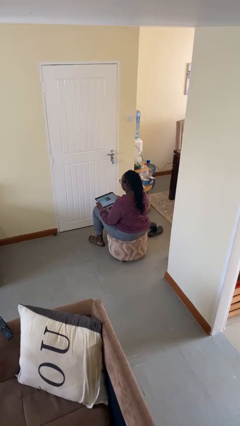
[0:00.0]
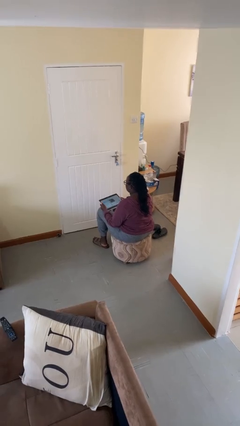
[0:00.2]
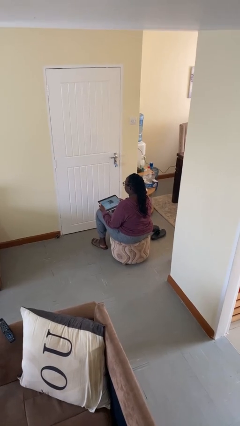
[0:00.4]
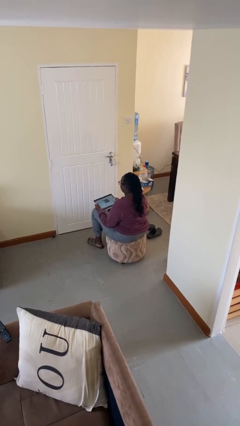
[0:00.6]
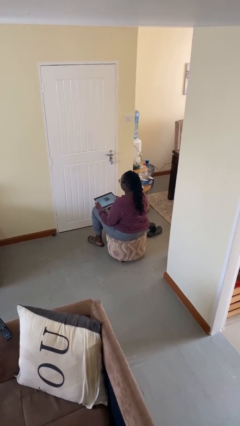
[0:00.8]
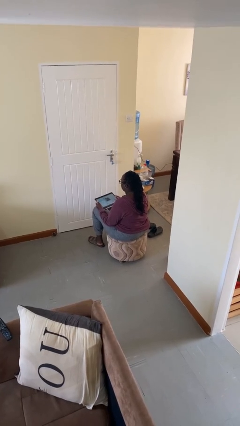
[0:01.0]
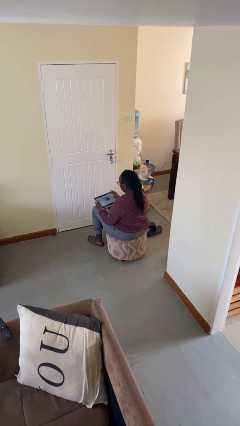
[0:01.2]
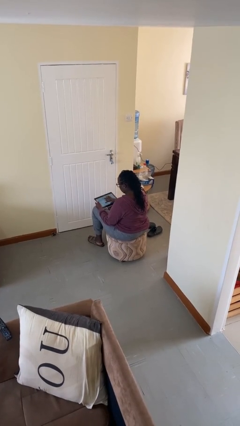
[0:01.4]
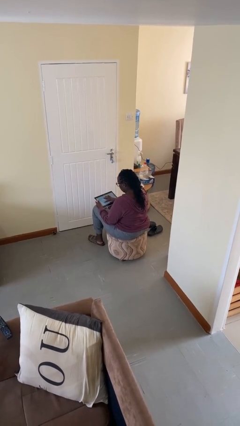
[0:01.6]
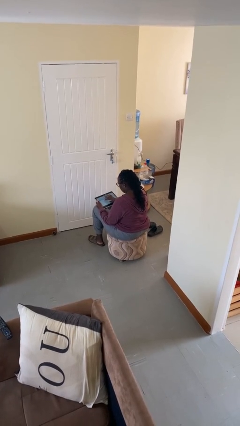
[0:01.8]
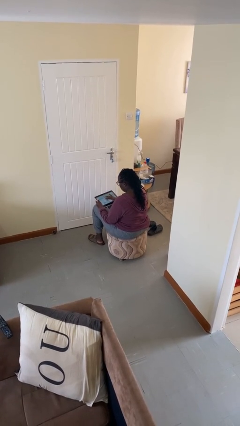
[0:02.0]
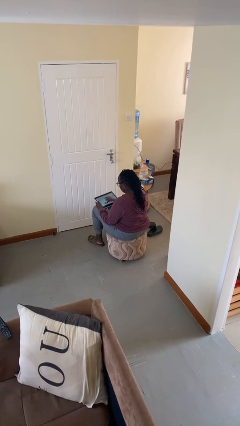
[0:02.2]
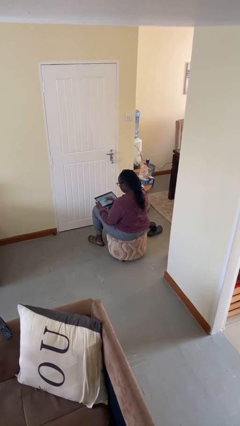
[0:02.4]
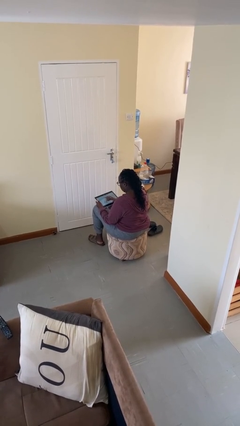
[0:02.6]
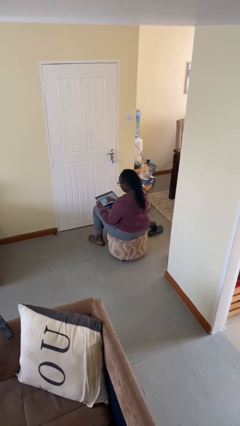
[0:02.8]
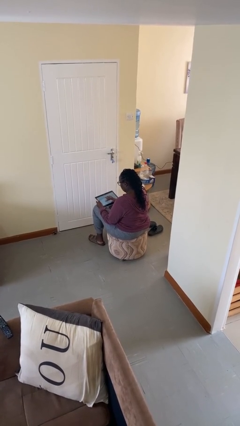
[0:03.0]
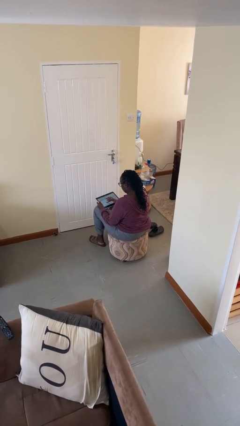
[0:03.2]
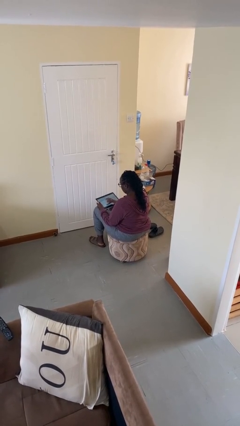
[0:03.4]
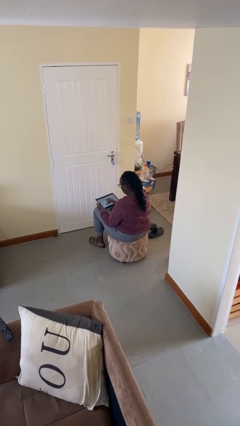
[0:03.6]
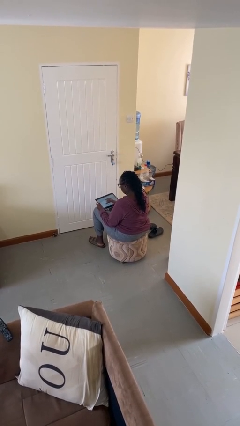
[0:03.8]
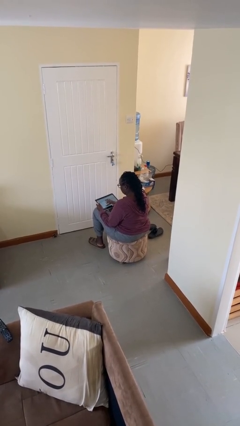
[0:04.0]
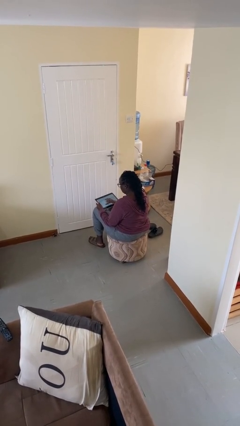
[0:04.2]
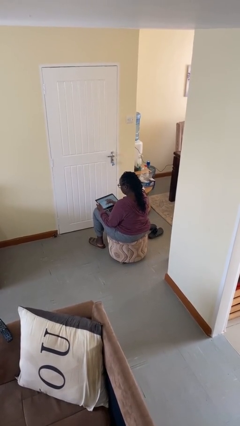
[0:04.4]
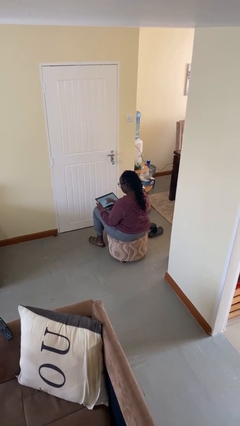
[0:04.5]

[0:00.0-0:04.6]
person interacts with tablet

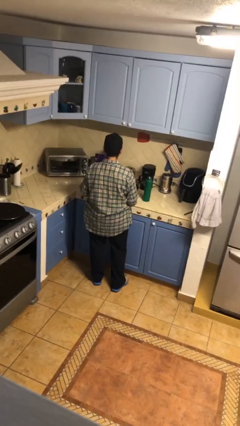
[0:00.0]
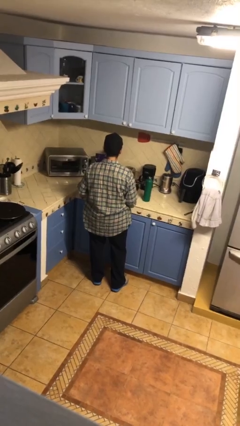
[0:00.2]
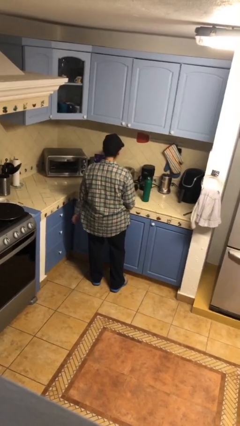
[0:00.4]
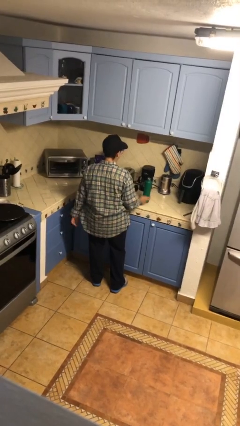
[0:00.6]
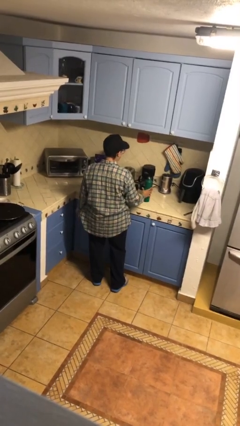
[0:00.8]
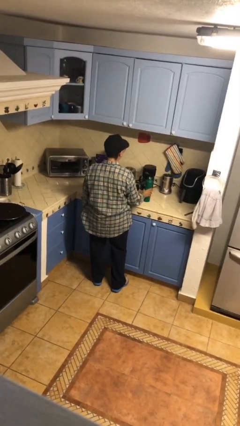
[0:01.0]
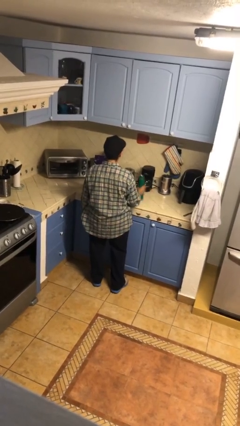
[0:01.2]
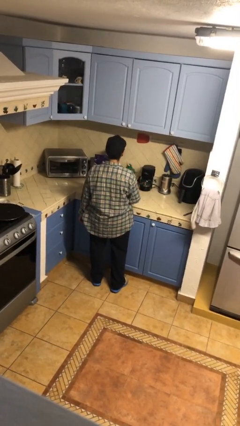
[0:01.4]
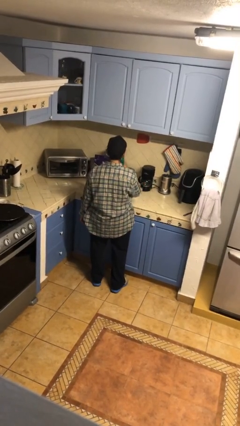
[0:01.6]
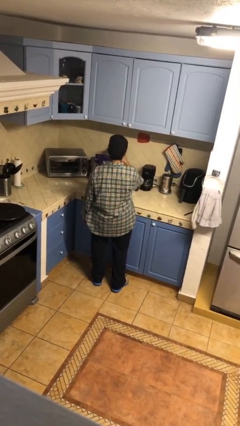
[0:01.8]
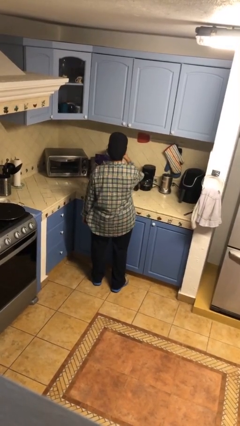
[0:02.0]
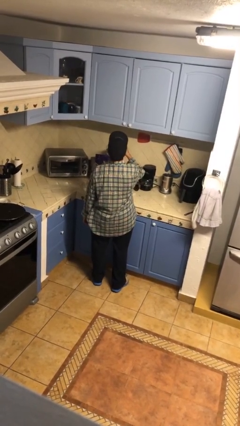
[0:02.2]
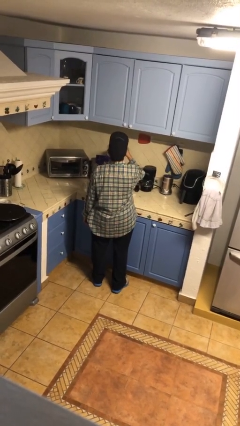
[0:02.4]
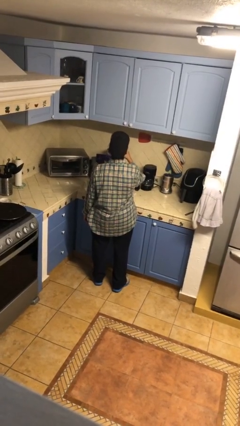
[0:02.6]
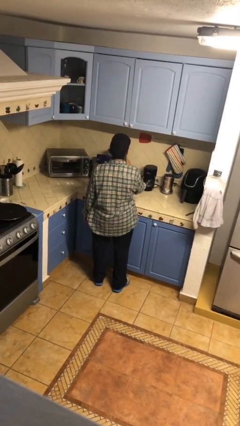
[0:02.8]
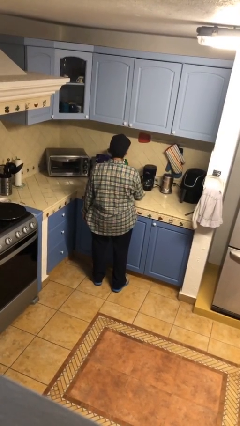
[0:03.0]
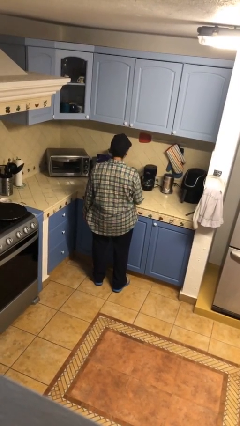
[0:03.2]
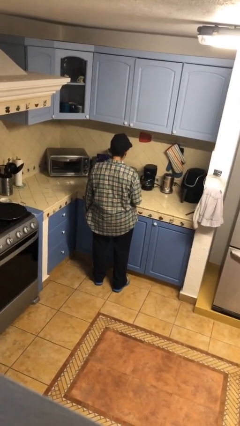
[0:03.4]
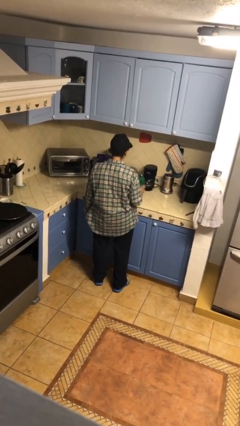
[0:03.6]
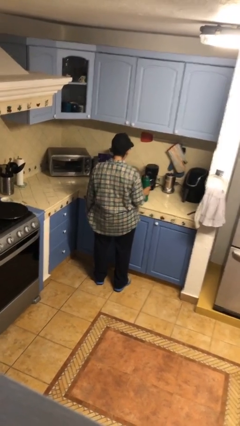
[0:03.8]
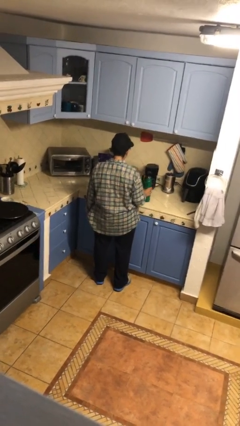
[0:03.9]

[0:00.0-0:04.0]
person drinks from bottle

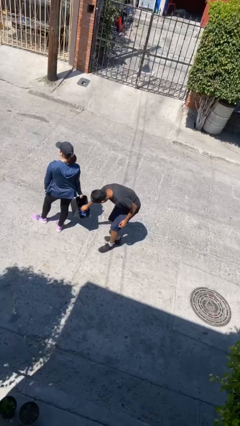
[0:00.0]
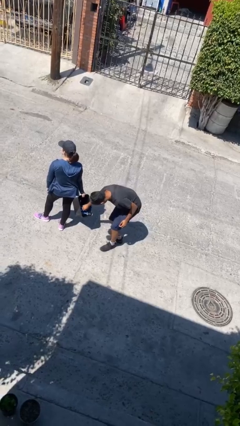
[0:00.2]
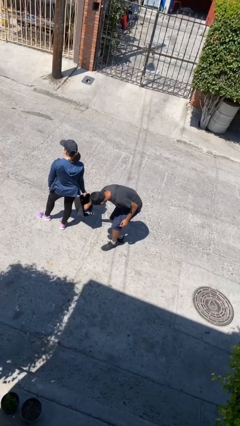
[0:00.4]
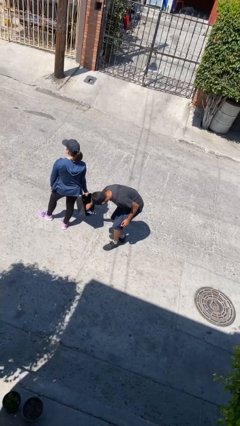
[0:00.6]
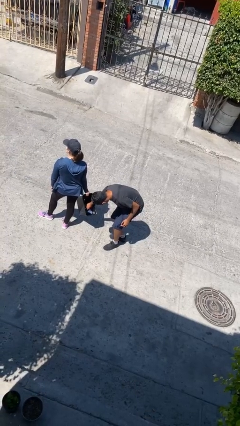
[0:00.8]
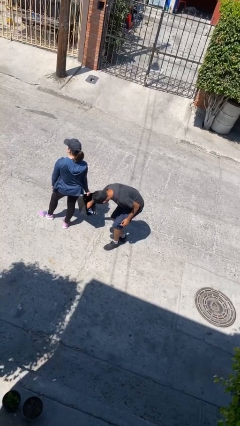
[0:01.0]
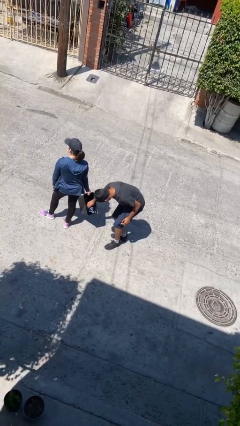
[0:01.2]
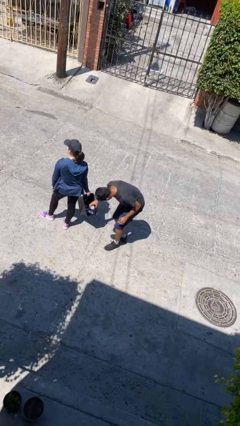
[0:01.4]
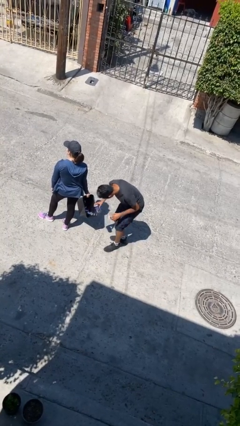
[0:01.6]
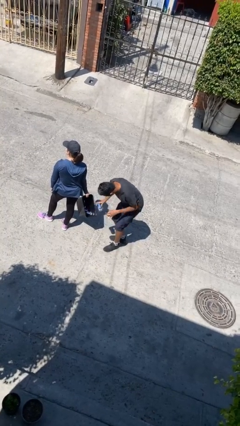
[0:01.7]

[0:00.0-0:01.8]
person steals object from person

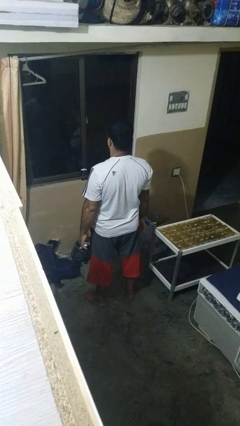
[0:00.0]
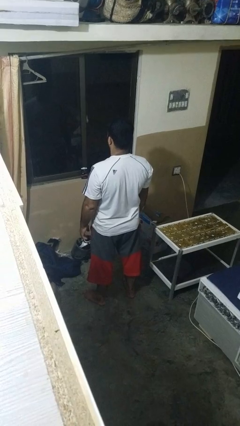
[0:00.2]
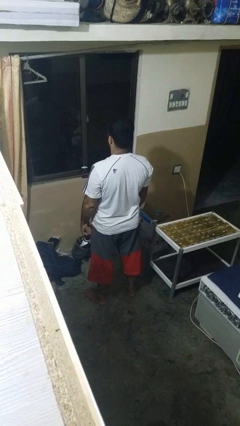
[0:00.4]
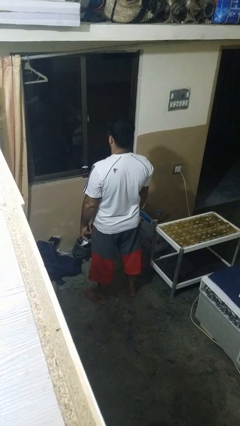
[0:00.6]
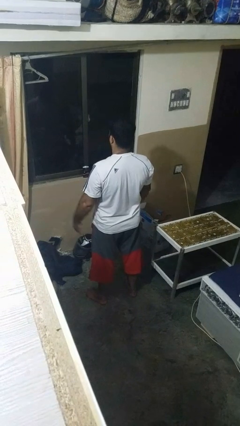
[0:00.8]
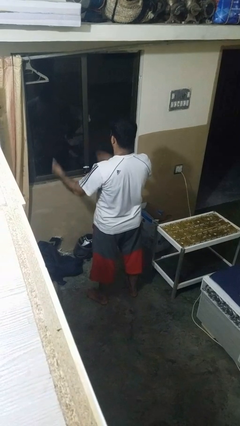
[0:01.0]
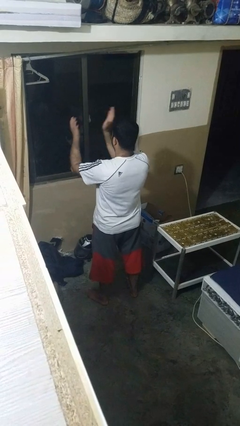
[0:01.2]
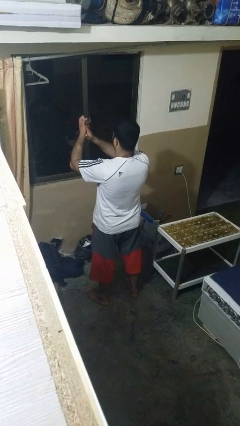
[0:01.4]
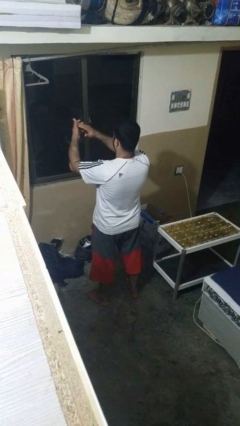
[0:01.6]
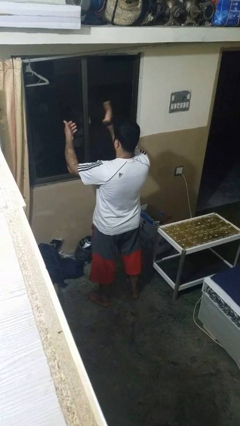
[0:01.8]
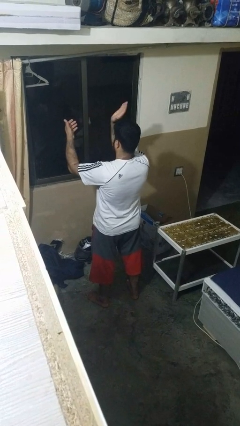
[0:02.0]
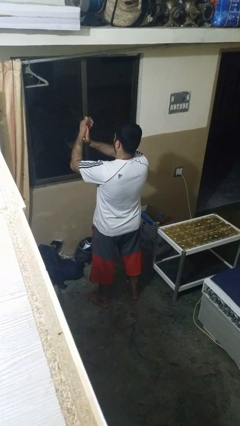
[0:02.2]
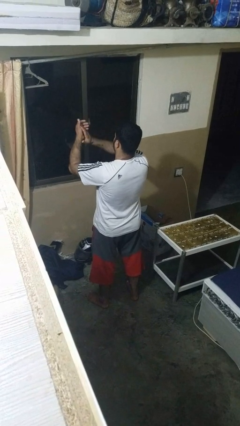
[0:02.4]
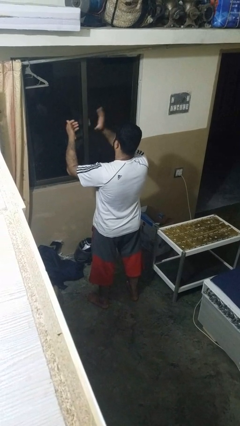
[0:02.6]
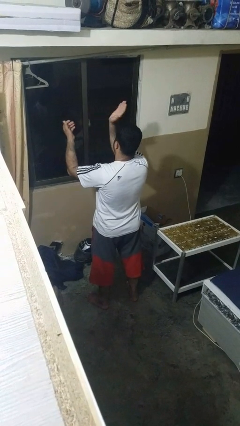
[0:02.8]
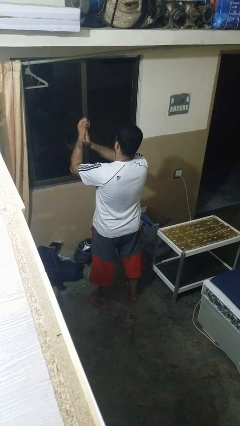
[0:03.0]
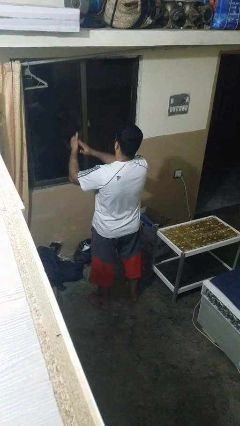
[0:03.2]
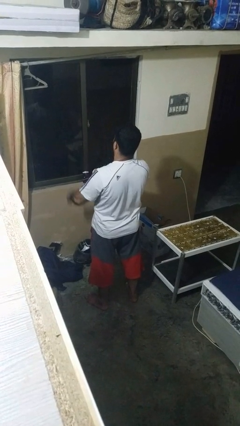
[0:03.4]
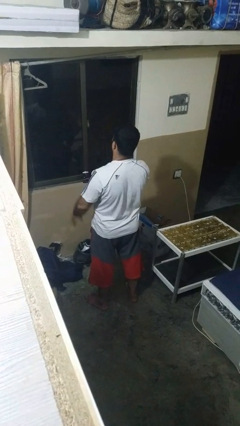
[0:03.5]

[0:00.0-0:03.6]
person claps hands

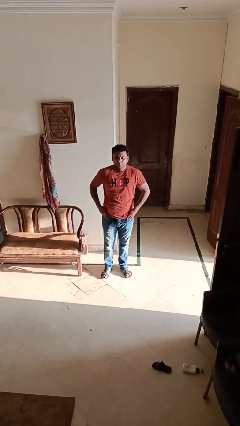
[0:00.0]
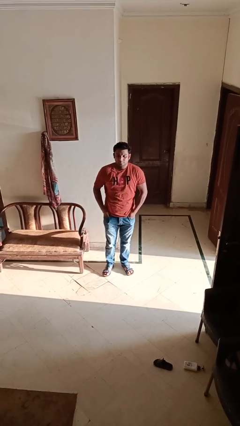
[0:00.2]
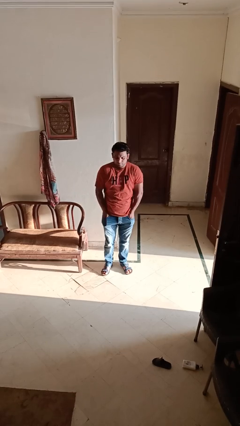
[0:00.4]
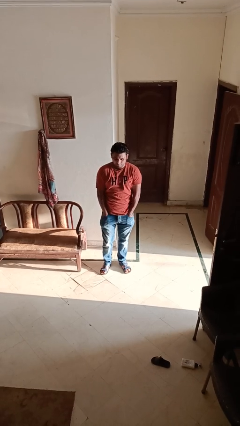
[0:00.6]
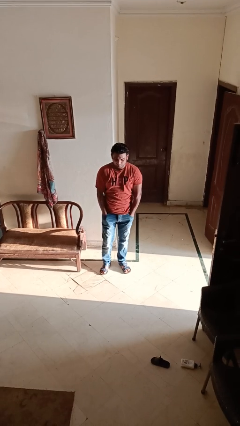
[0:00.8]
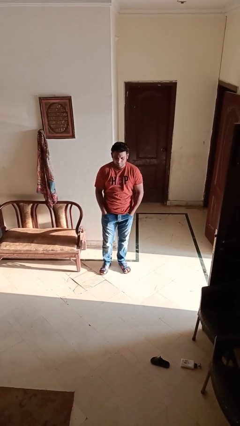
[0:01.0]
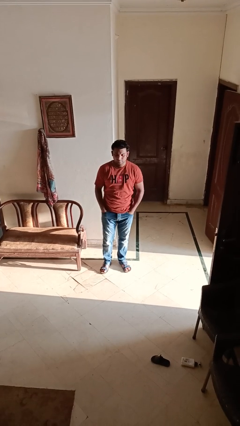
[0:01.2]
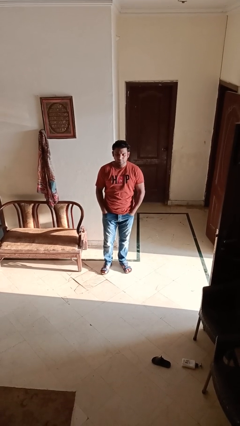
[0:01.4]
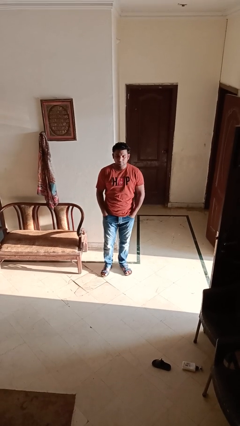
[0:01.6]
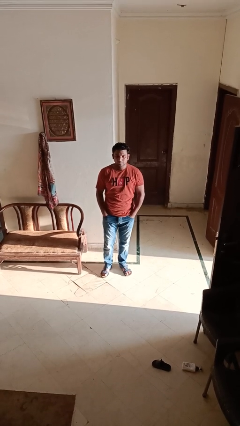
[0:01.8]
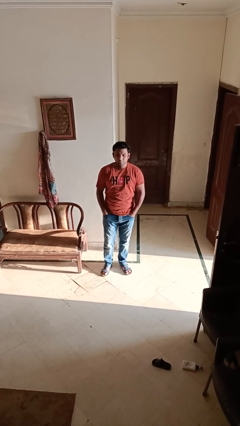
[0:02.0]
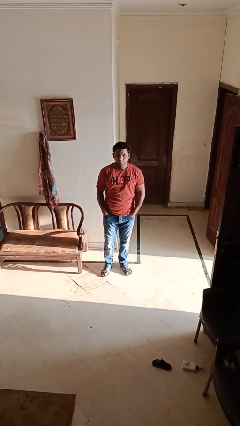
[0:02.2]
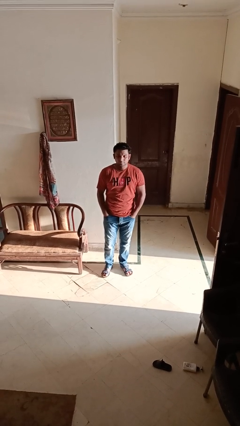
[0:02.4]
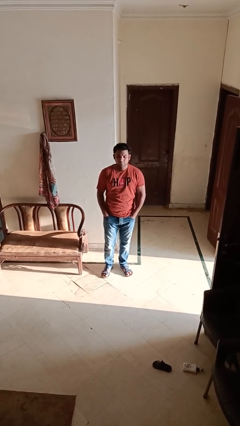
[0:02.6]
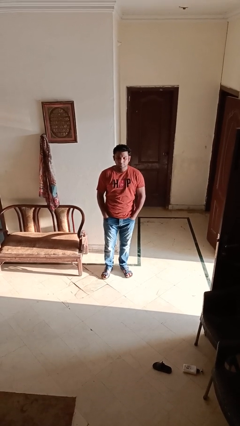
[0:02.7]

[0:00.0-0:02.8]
person puts hands in back pockets

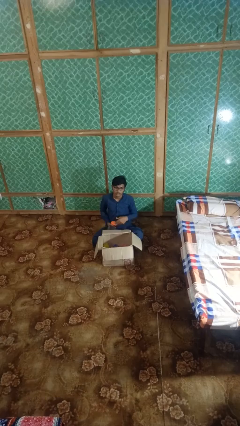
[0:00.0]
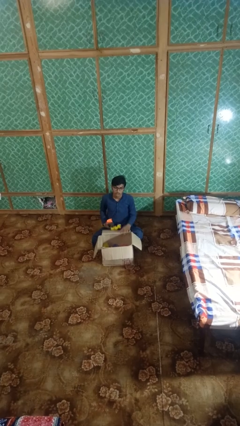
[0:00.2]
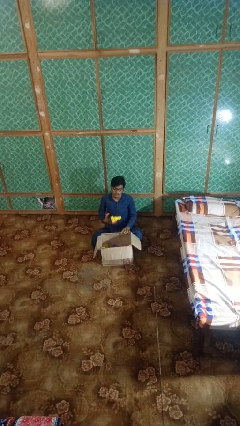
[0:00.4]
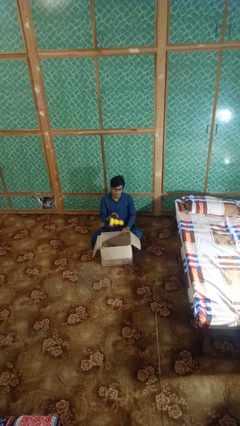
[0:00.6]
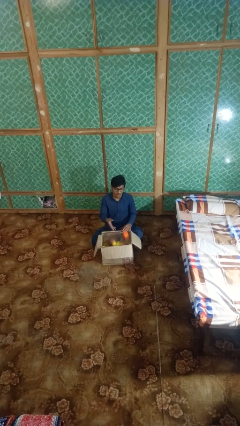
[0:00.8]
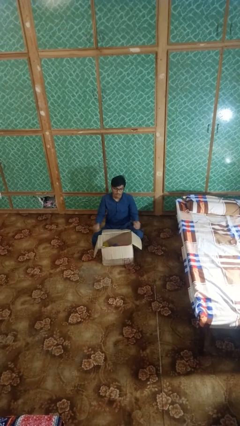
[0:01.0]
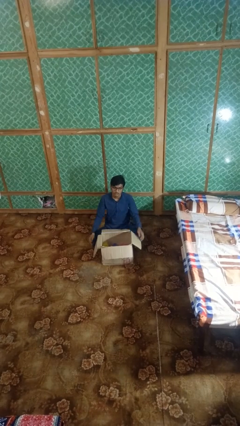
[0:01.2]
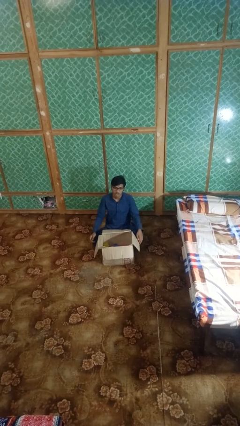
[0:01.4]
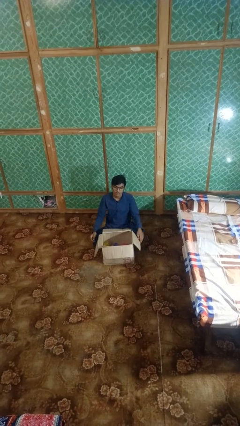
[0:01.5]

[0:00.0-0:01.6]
person puts object into box
